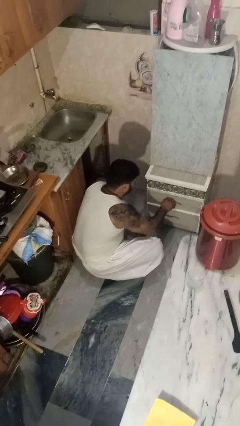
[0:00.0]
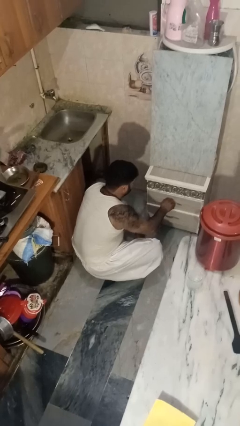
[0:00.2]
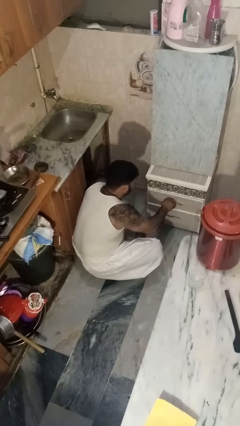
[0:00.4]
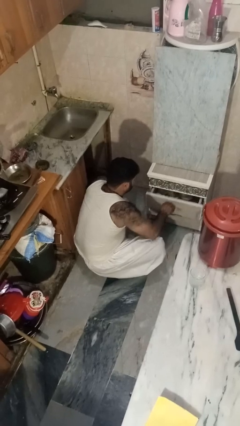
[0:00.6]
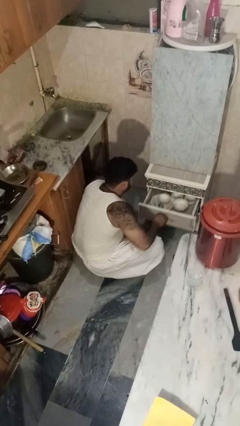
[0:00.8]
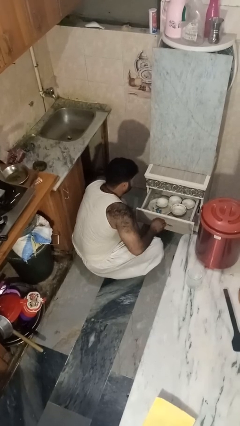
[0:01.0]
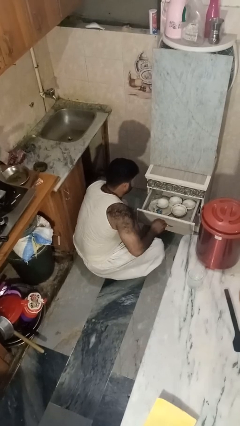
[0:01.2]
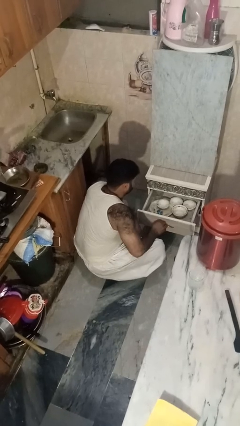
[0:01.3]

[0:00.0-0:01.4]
person opens kitchen drawer

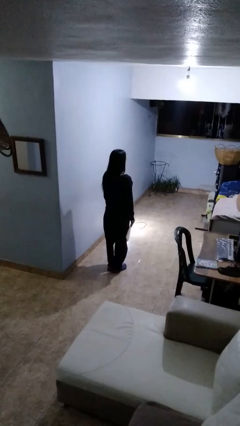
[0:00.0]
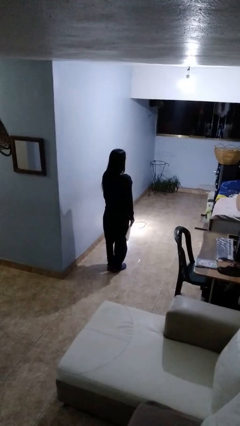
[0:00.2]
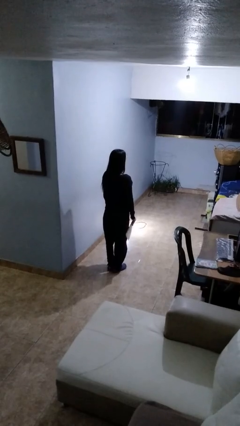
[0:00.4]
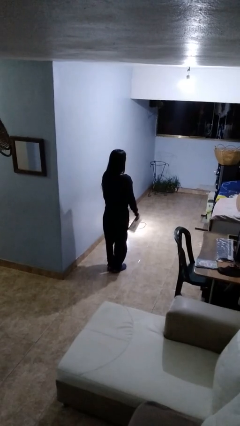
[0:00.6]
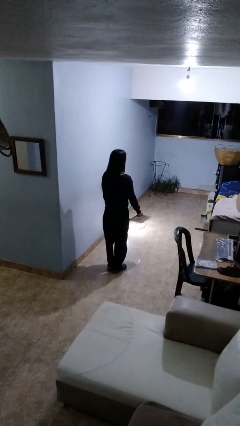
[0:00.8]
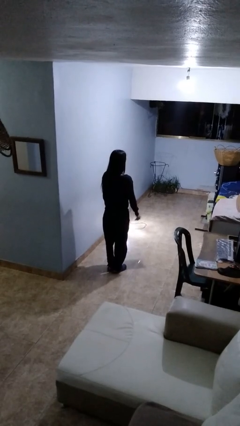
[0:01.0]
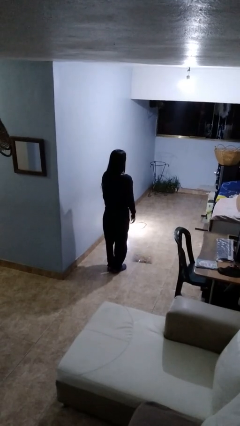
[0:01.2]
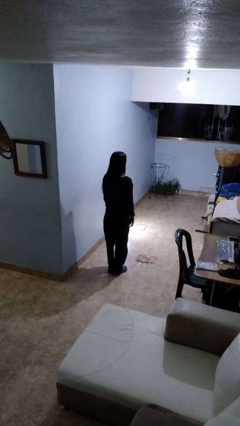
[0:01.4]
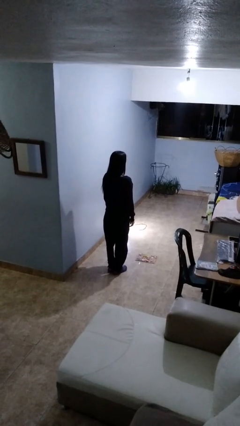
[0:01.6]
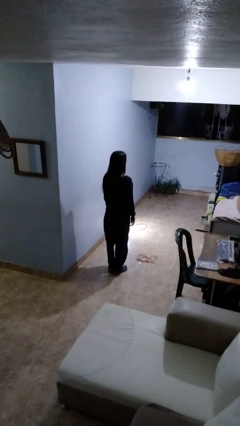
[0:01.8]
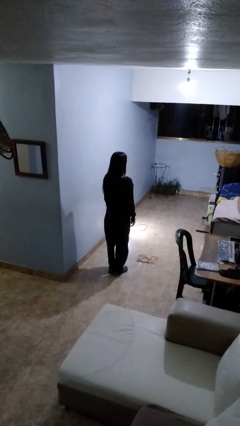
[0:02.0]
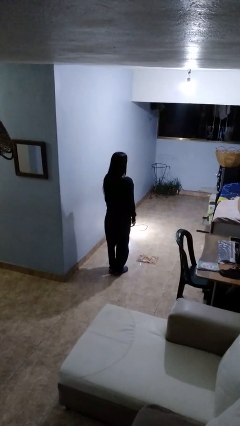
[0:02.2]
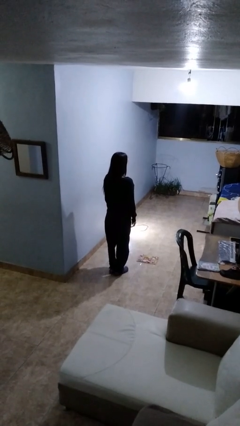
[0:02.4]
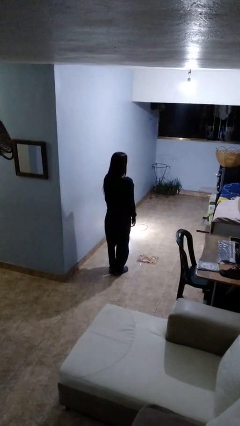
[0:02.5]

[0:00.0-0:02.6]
person throws object to ground

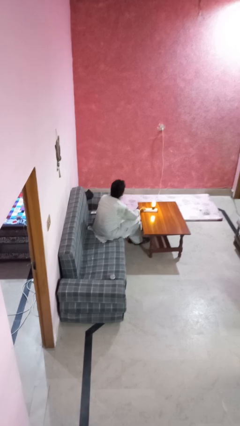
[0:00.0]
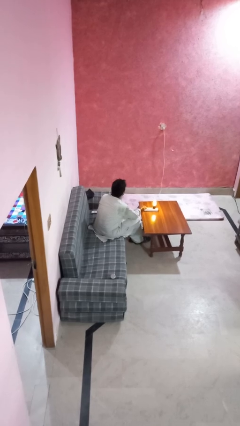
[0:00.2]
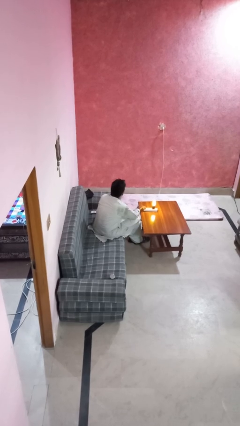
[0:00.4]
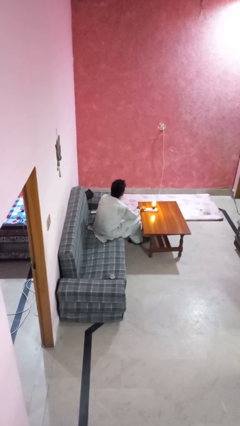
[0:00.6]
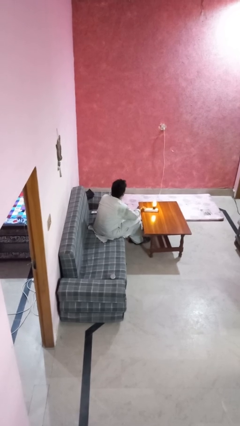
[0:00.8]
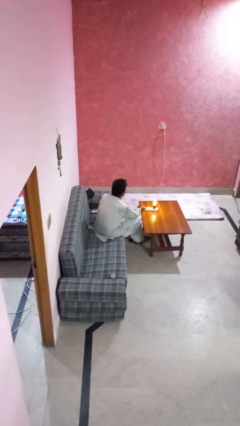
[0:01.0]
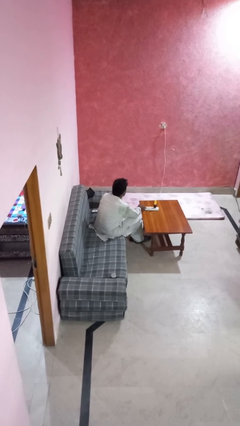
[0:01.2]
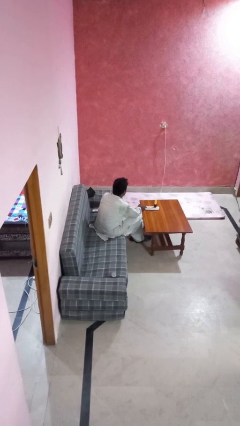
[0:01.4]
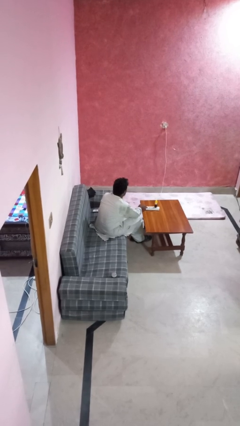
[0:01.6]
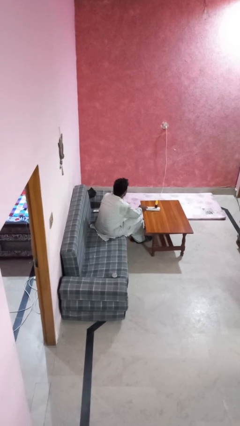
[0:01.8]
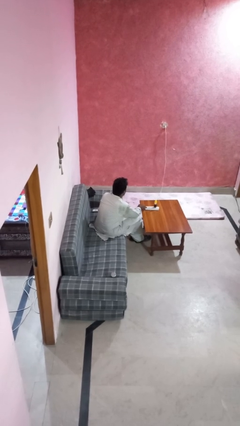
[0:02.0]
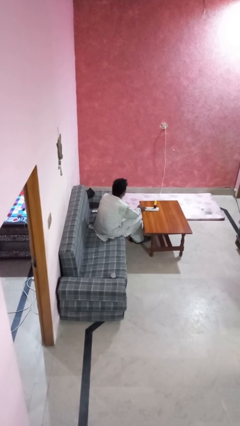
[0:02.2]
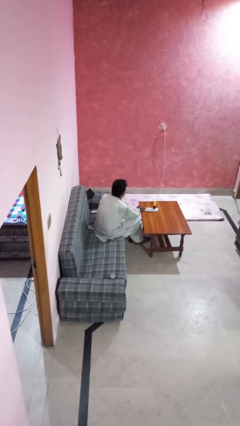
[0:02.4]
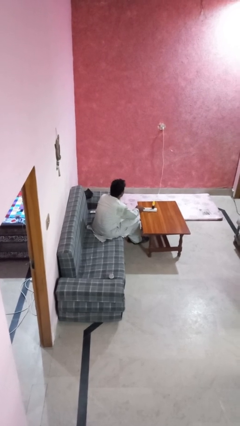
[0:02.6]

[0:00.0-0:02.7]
person turns off lamp

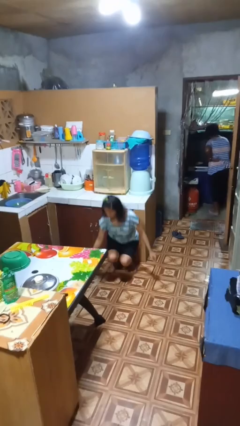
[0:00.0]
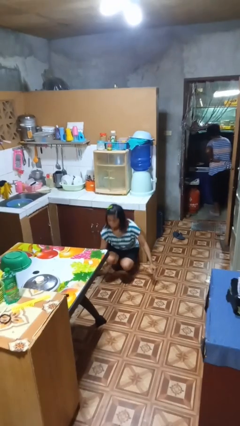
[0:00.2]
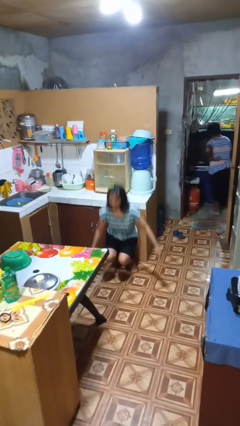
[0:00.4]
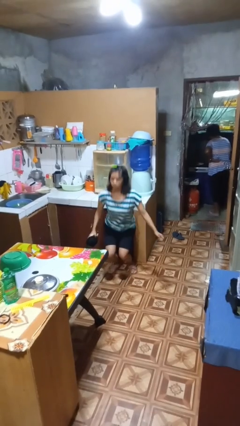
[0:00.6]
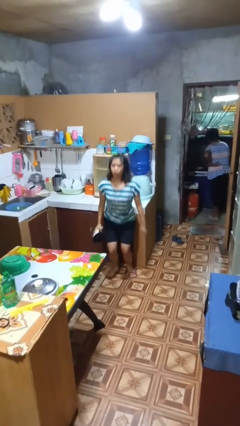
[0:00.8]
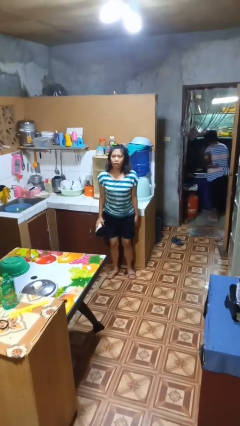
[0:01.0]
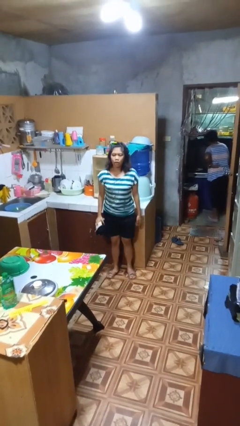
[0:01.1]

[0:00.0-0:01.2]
person picks up object from floor

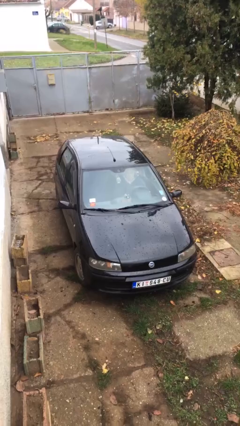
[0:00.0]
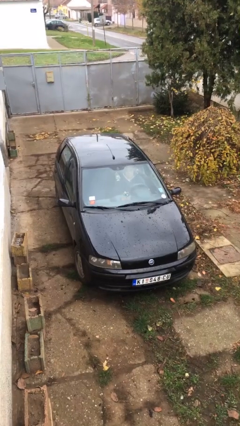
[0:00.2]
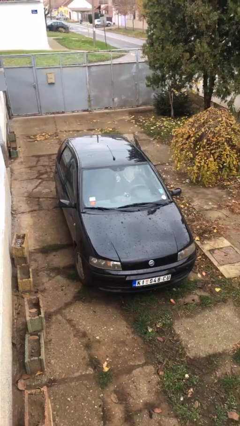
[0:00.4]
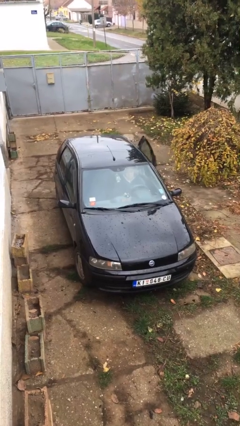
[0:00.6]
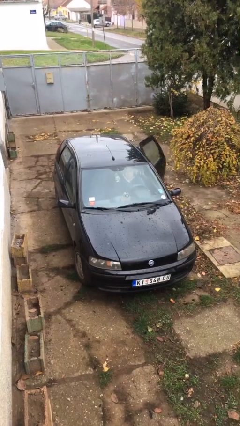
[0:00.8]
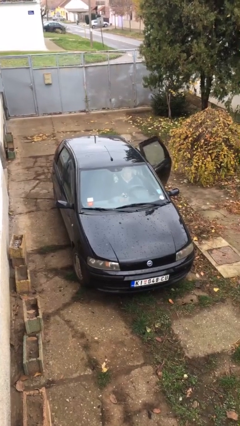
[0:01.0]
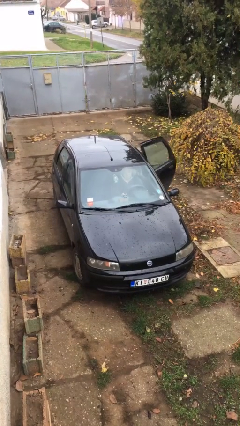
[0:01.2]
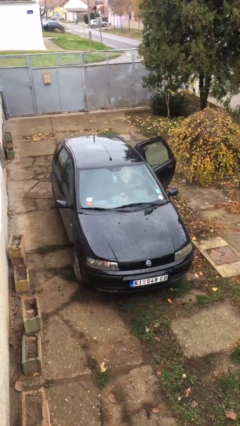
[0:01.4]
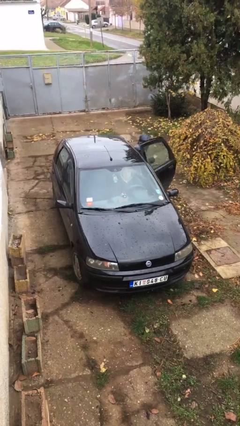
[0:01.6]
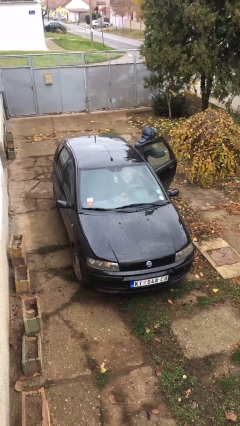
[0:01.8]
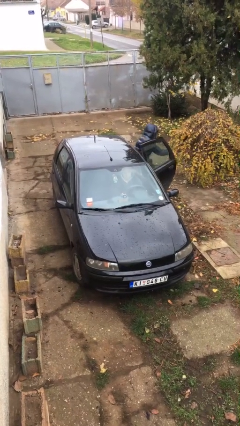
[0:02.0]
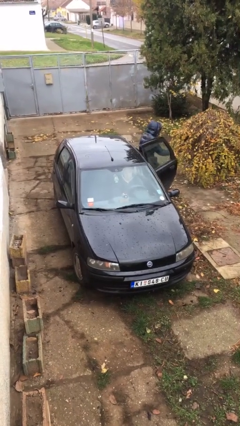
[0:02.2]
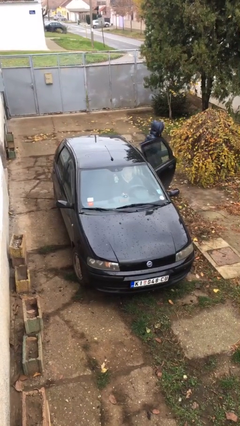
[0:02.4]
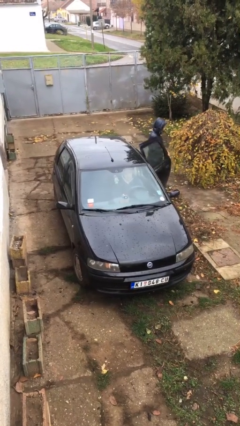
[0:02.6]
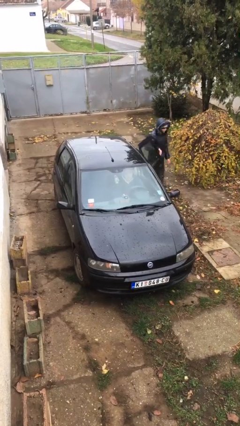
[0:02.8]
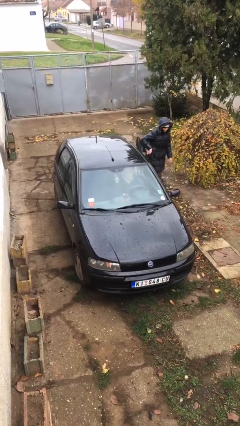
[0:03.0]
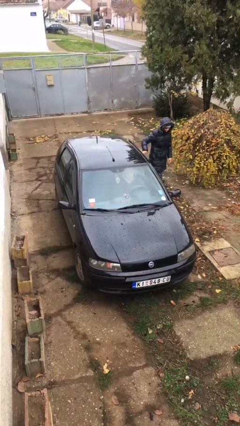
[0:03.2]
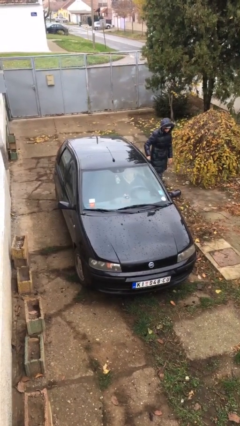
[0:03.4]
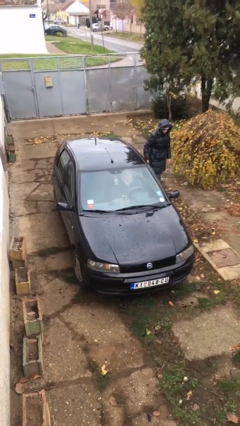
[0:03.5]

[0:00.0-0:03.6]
car drops off person

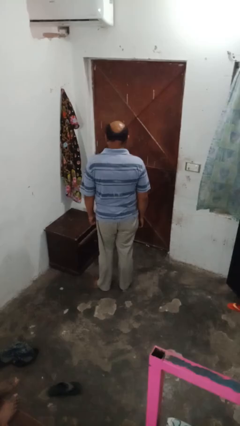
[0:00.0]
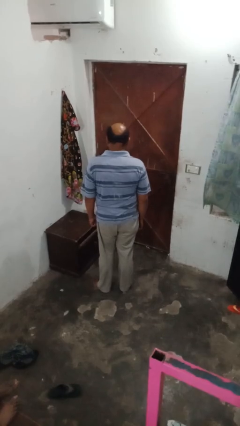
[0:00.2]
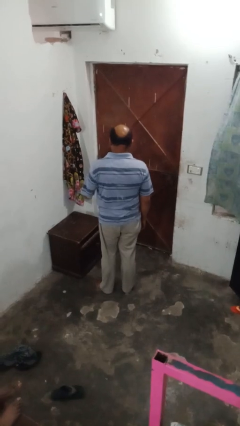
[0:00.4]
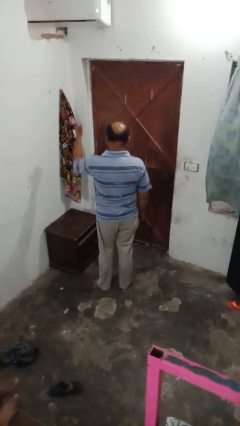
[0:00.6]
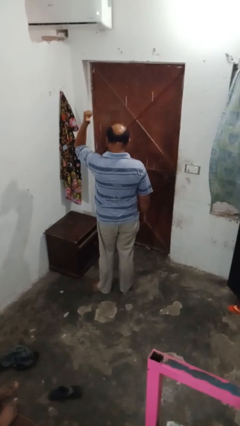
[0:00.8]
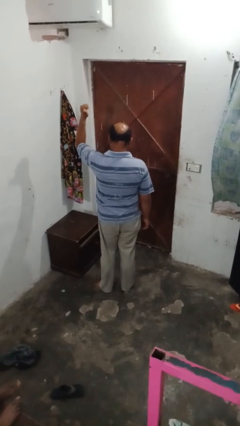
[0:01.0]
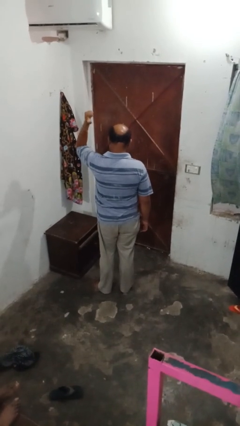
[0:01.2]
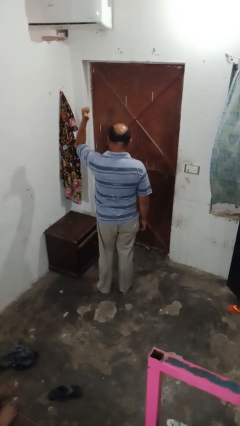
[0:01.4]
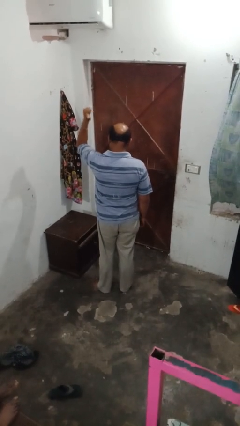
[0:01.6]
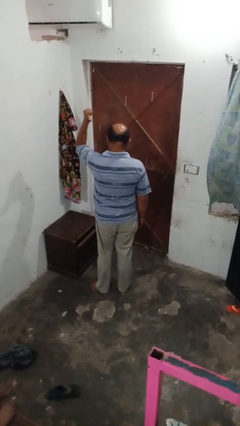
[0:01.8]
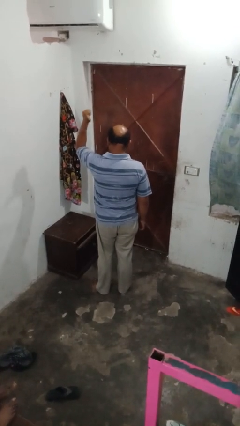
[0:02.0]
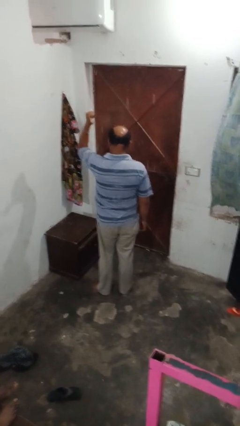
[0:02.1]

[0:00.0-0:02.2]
person gestures behind me

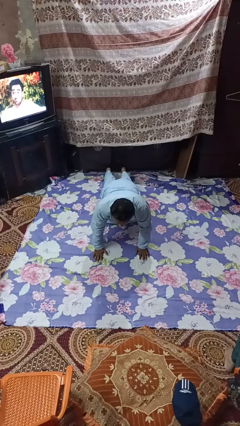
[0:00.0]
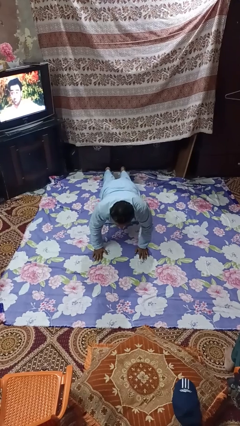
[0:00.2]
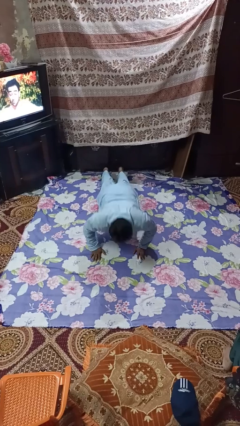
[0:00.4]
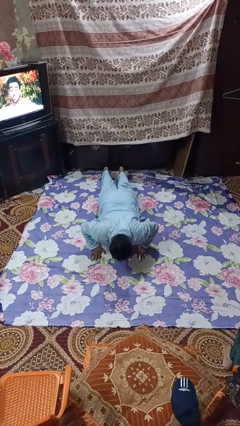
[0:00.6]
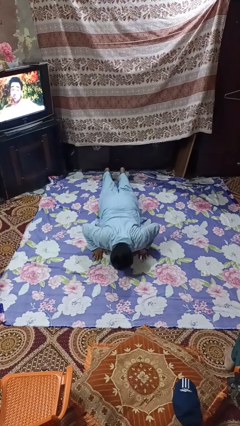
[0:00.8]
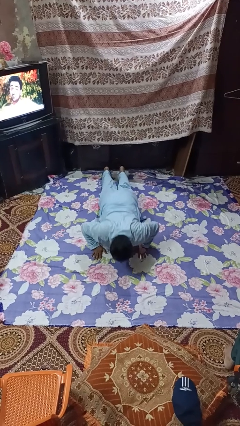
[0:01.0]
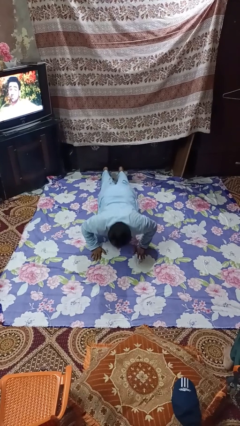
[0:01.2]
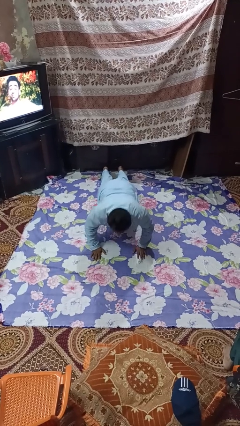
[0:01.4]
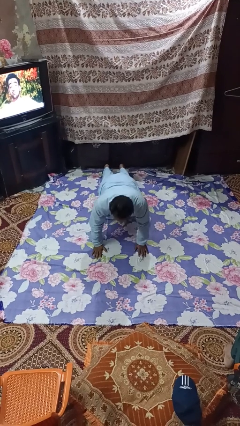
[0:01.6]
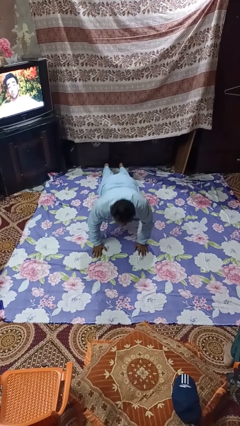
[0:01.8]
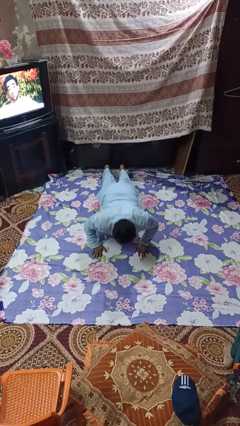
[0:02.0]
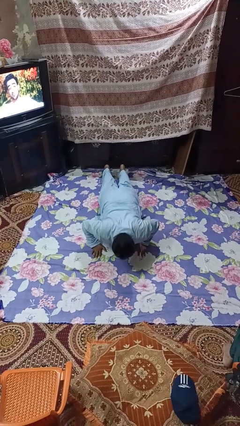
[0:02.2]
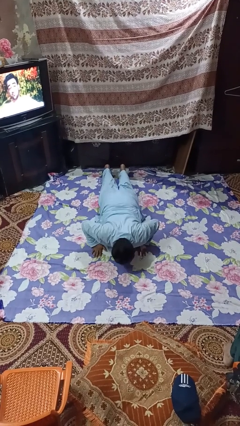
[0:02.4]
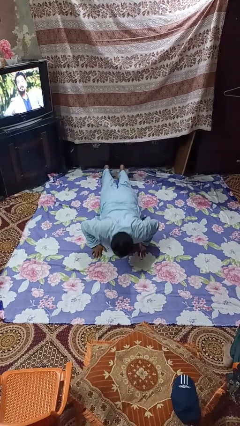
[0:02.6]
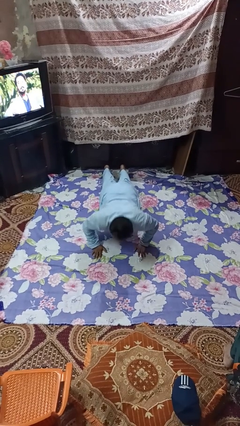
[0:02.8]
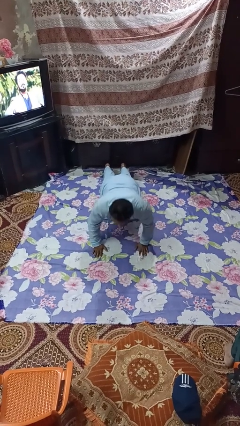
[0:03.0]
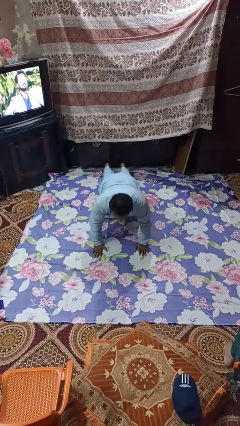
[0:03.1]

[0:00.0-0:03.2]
person exercises with pushup

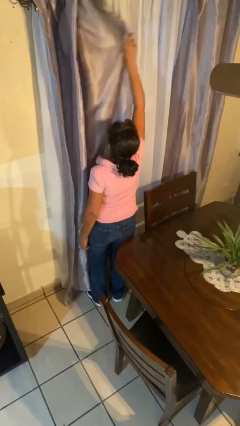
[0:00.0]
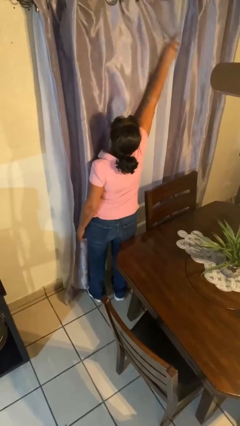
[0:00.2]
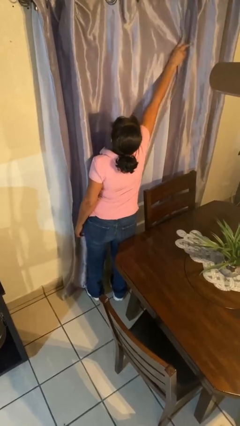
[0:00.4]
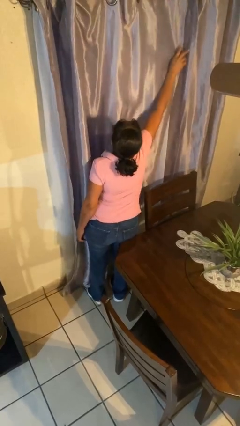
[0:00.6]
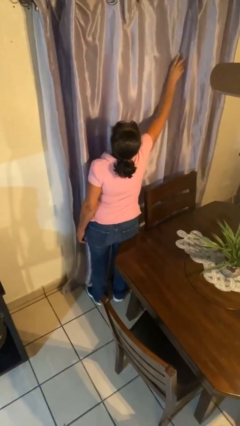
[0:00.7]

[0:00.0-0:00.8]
person closes curtains
